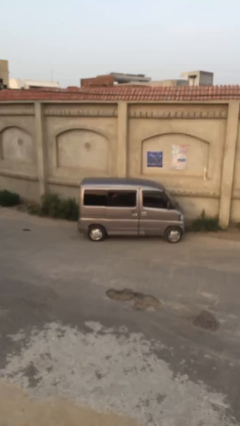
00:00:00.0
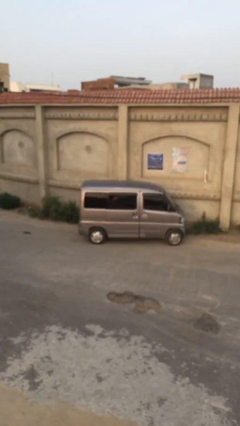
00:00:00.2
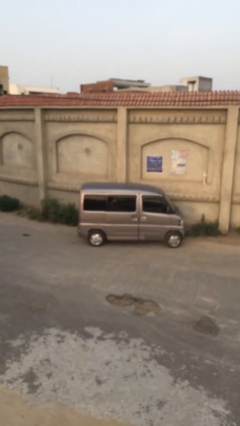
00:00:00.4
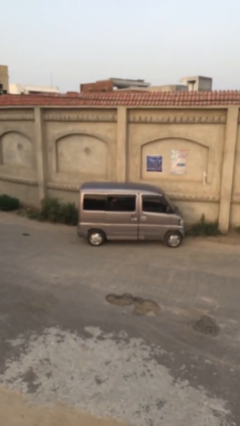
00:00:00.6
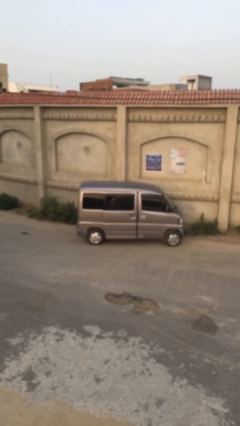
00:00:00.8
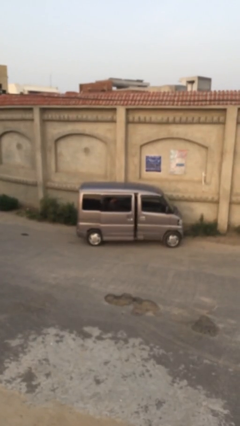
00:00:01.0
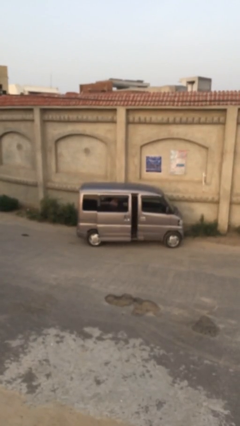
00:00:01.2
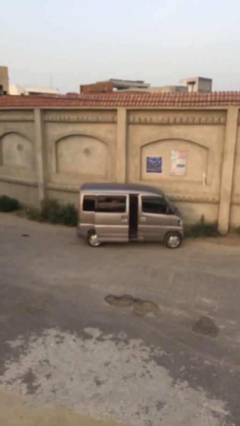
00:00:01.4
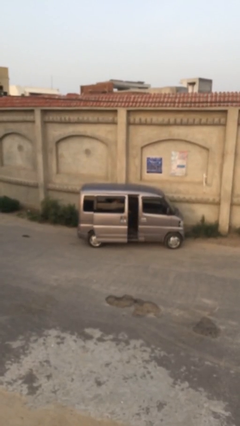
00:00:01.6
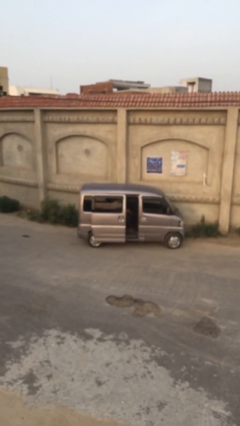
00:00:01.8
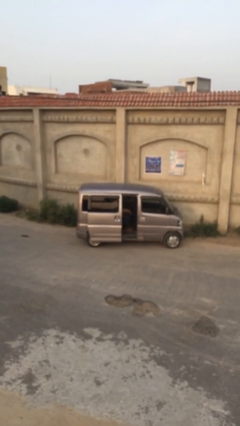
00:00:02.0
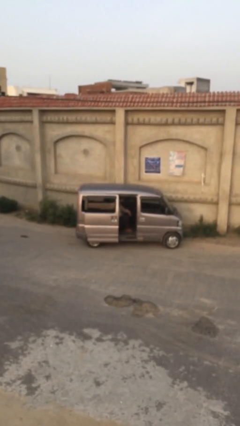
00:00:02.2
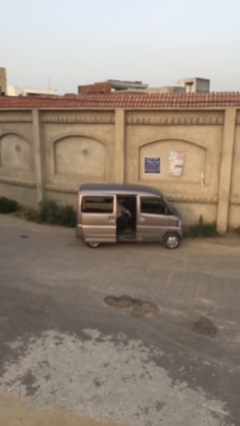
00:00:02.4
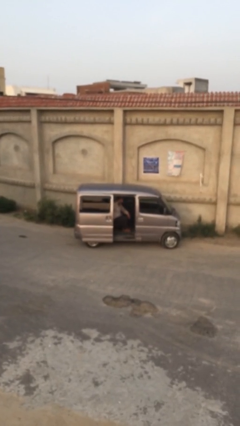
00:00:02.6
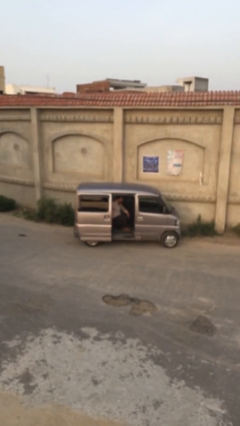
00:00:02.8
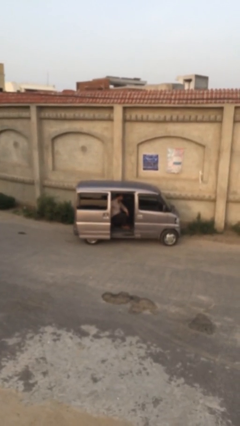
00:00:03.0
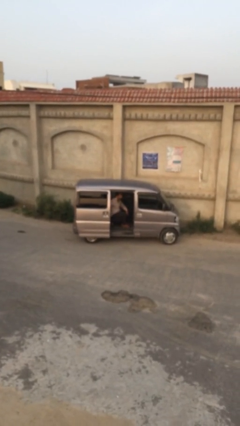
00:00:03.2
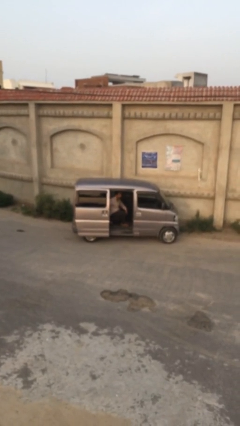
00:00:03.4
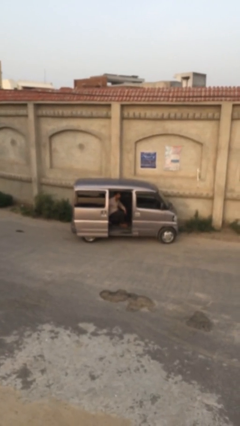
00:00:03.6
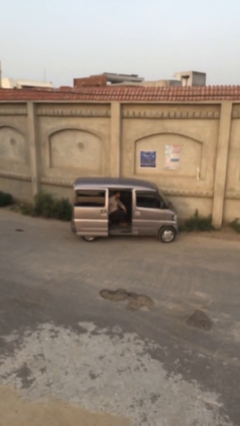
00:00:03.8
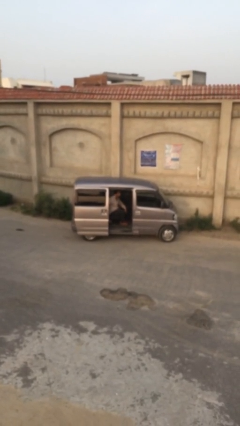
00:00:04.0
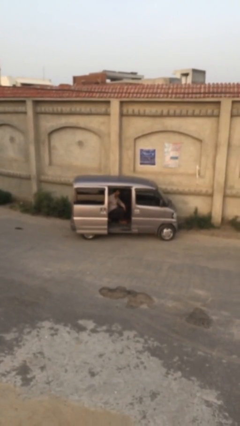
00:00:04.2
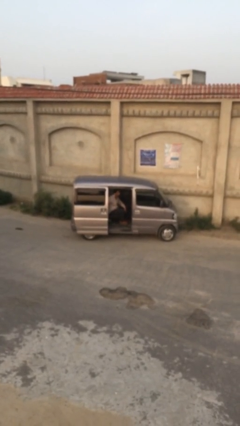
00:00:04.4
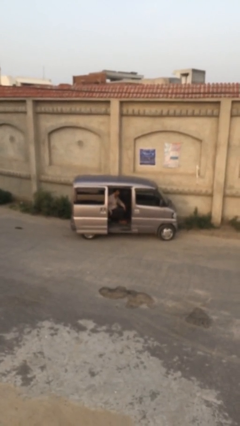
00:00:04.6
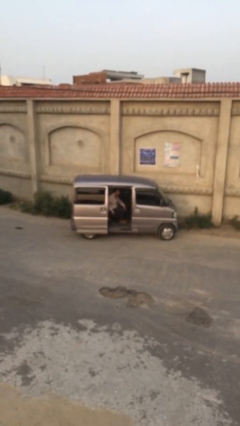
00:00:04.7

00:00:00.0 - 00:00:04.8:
person opens car door

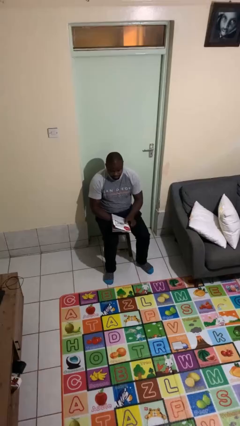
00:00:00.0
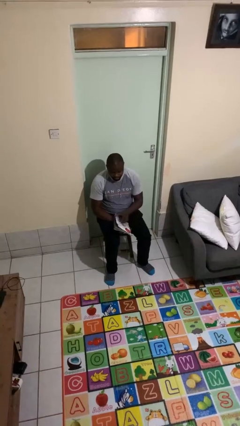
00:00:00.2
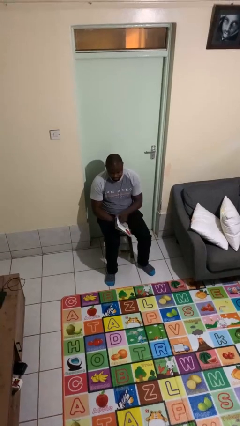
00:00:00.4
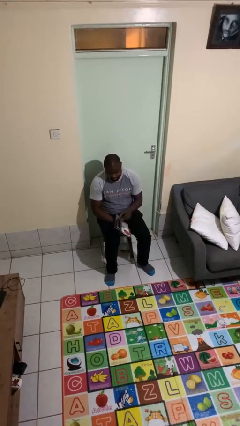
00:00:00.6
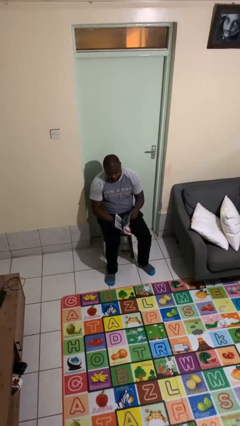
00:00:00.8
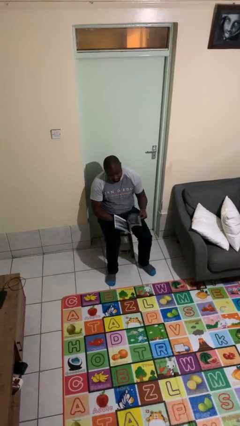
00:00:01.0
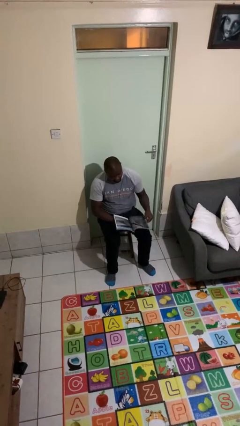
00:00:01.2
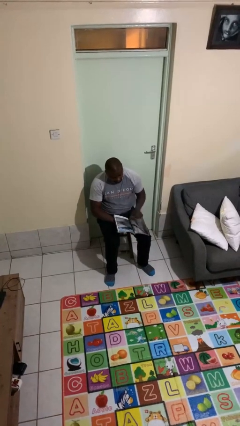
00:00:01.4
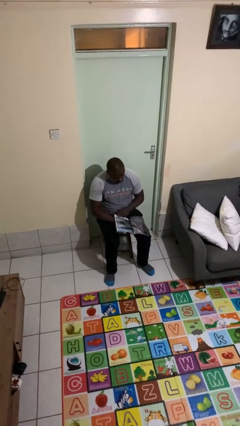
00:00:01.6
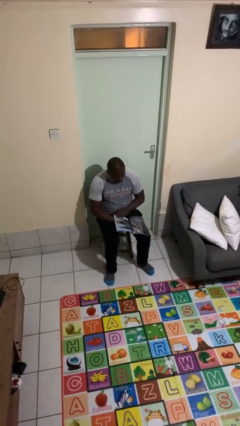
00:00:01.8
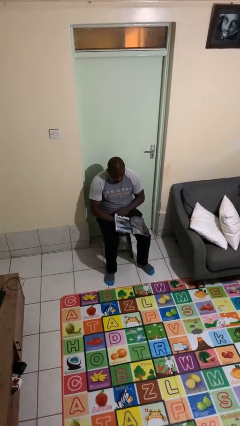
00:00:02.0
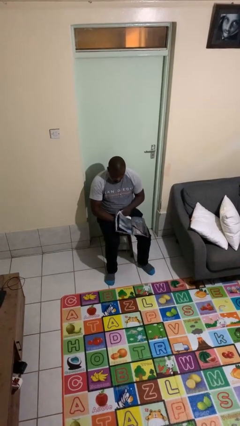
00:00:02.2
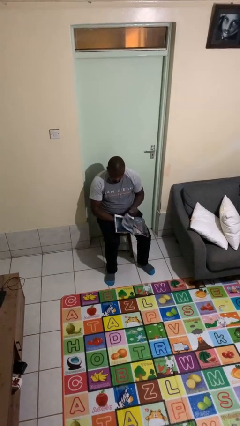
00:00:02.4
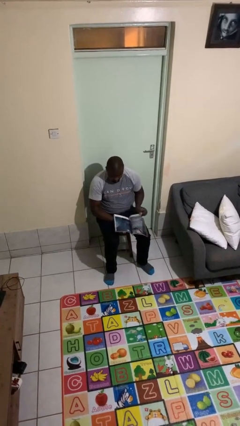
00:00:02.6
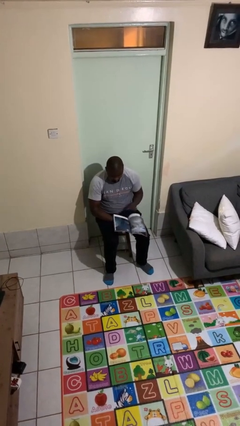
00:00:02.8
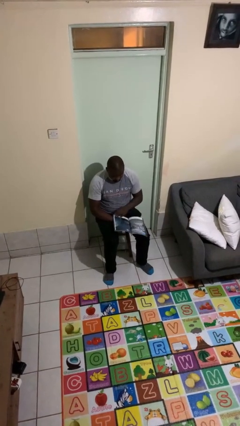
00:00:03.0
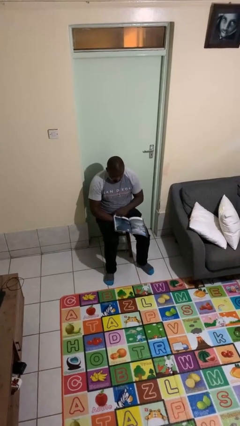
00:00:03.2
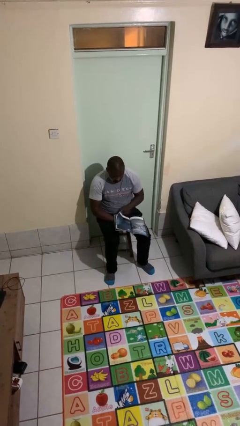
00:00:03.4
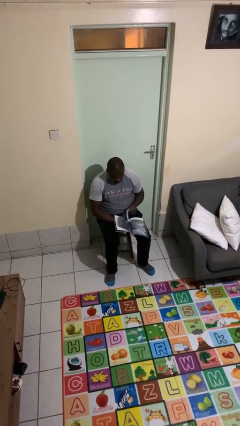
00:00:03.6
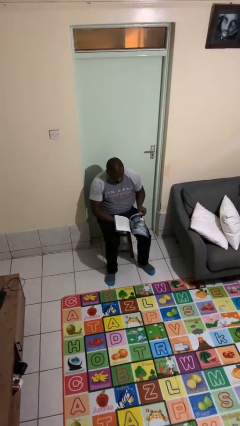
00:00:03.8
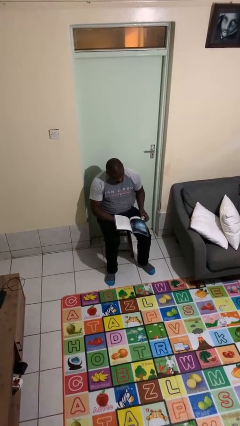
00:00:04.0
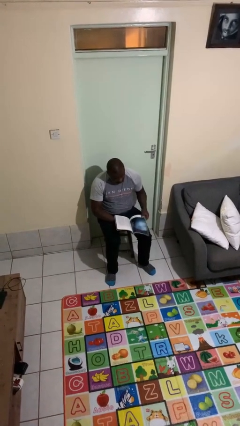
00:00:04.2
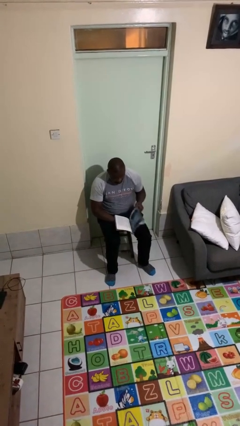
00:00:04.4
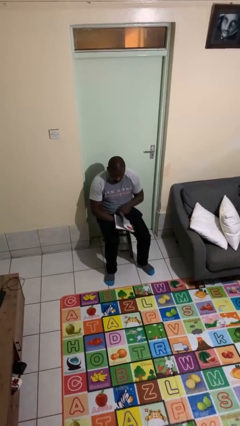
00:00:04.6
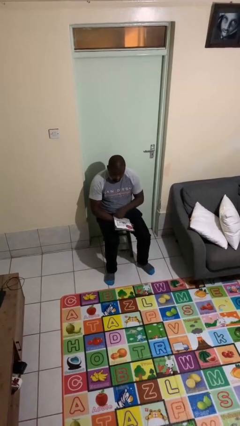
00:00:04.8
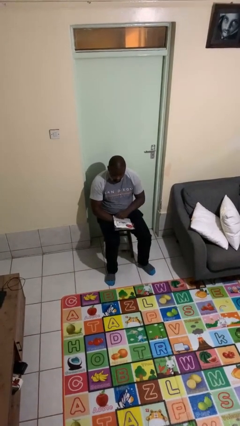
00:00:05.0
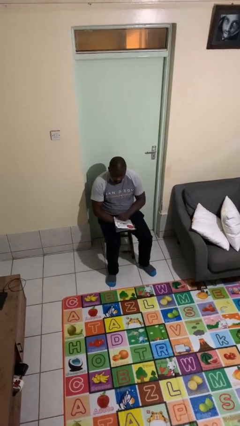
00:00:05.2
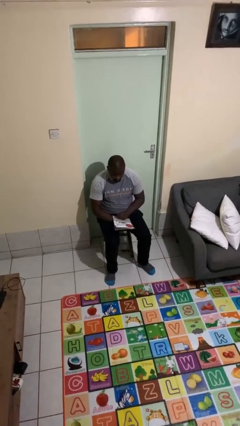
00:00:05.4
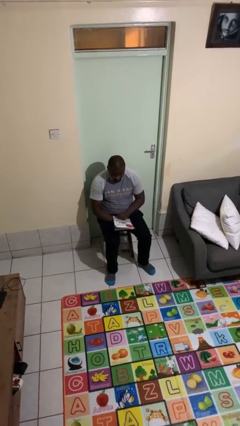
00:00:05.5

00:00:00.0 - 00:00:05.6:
person reads magazine

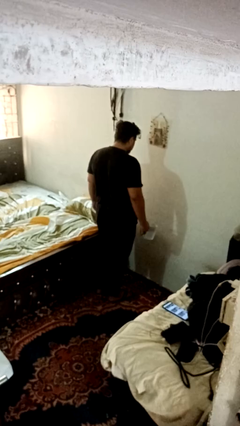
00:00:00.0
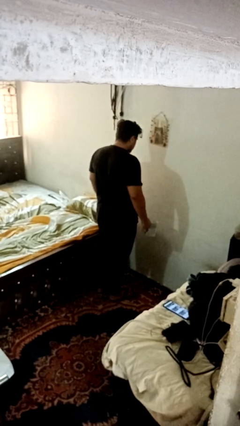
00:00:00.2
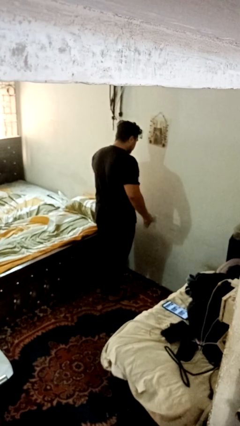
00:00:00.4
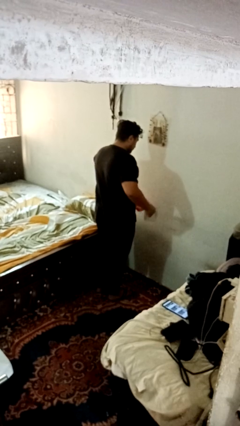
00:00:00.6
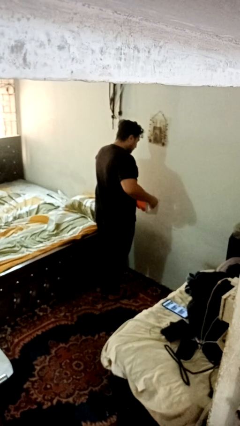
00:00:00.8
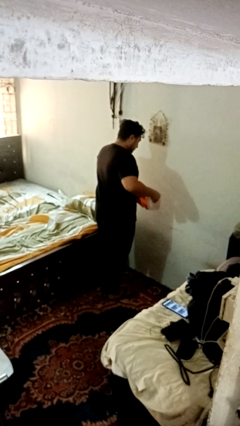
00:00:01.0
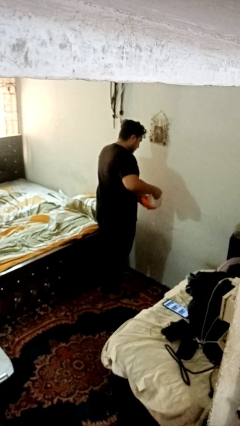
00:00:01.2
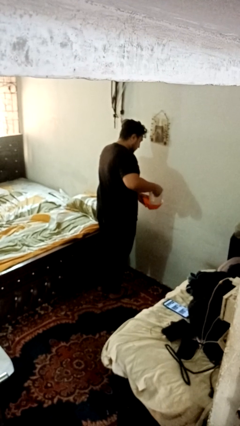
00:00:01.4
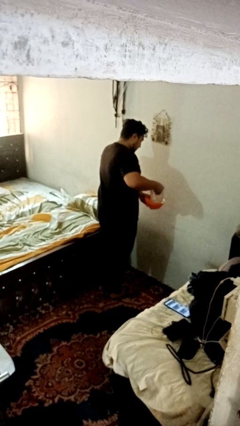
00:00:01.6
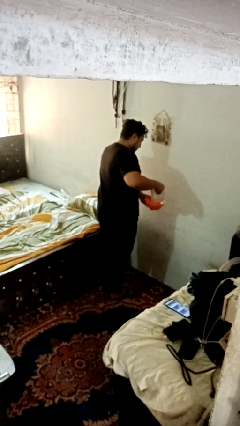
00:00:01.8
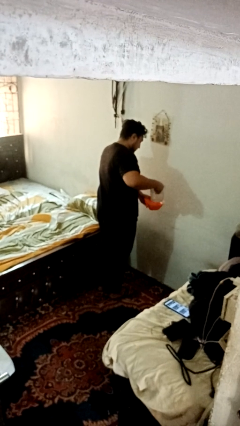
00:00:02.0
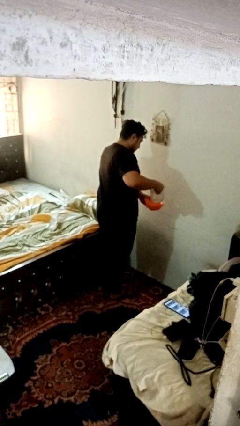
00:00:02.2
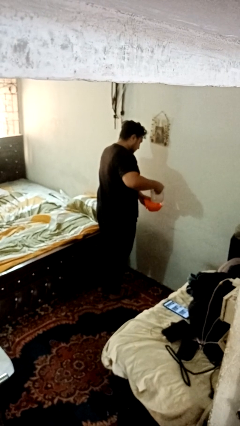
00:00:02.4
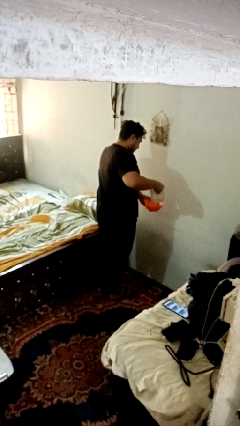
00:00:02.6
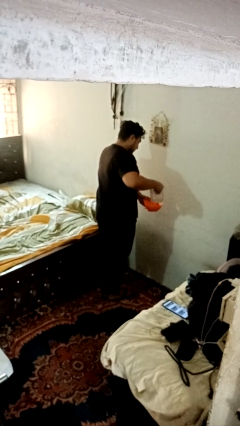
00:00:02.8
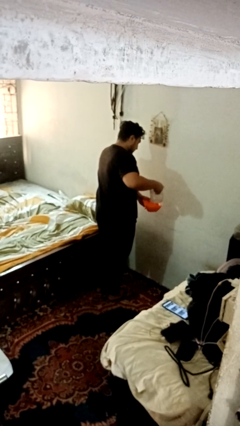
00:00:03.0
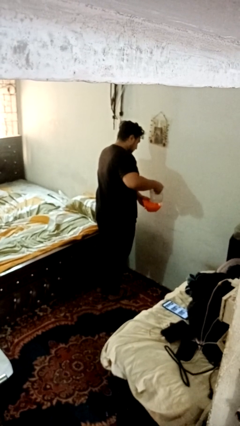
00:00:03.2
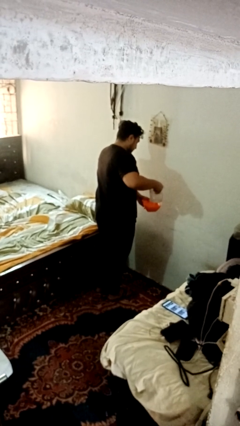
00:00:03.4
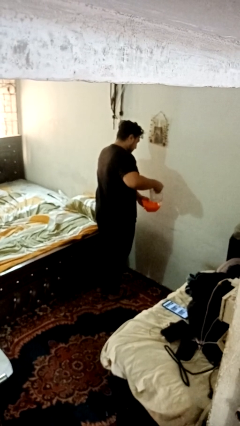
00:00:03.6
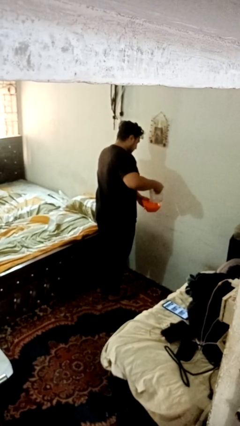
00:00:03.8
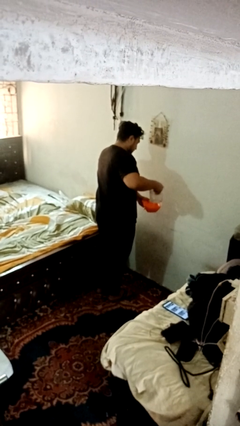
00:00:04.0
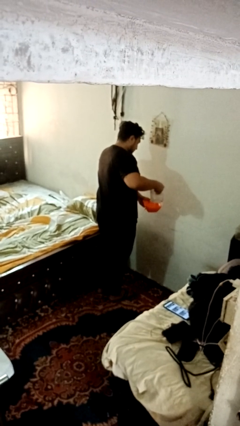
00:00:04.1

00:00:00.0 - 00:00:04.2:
person pours into bowl

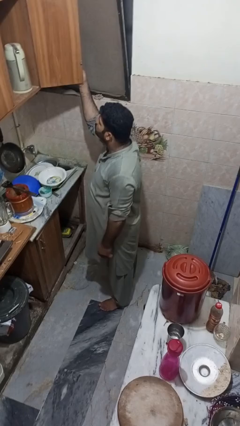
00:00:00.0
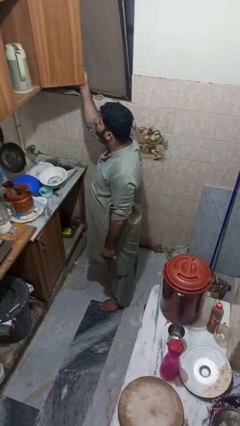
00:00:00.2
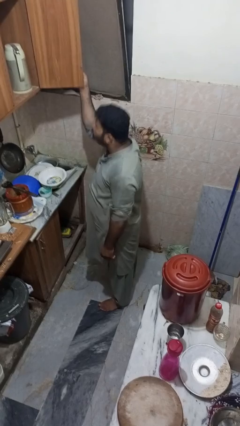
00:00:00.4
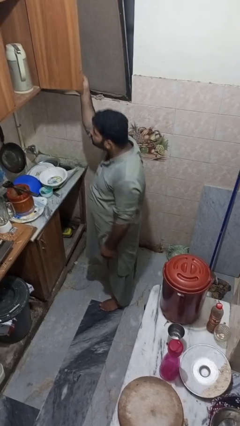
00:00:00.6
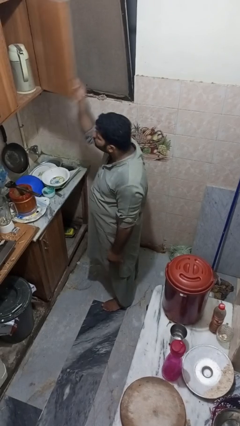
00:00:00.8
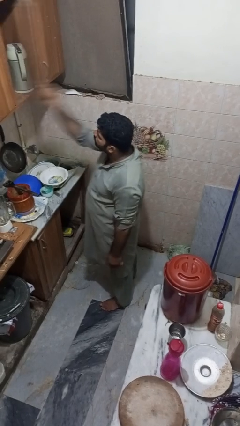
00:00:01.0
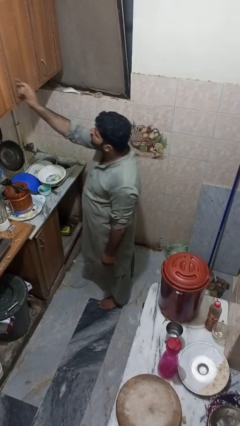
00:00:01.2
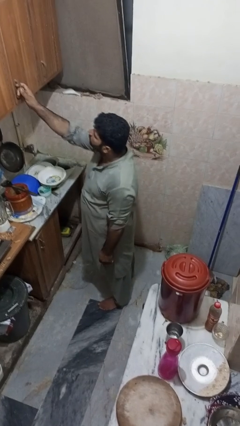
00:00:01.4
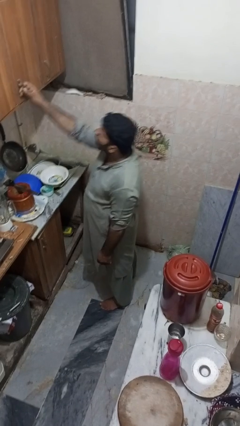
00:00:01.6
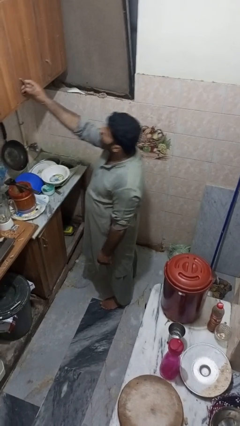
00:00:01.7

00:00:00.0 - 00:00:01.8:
person closes cabinet

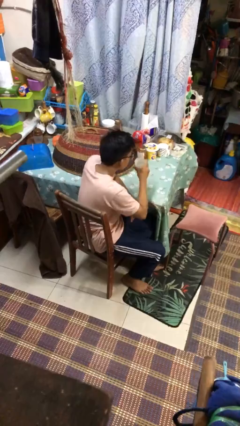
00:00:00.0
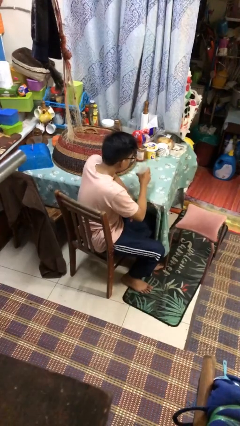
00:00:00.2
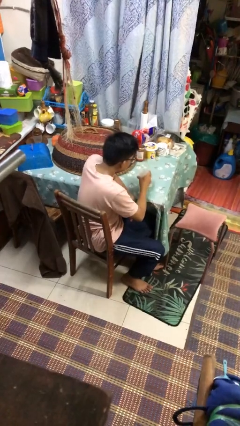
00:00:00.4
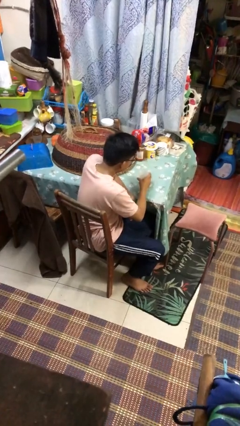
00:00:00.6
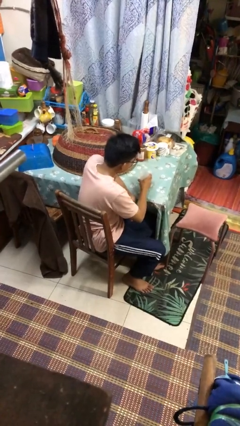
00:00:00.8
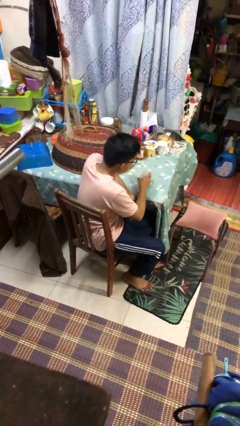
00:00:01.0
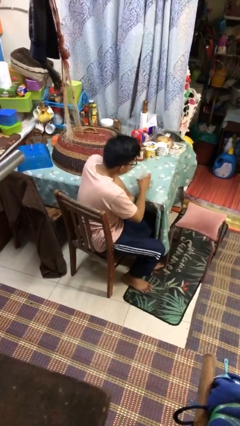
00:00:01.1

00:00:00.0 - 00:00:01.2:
person puts down object on table
